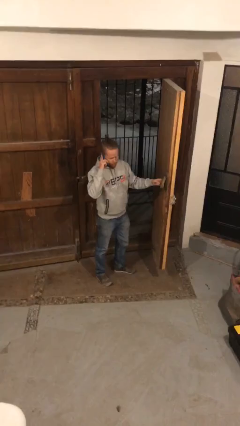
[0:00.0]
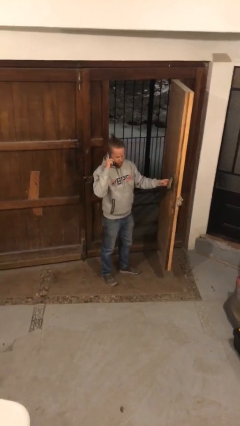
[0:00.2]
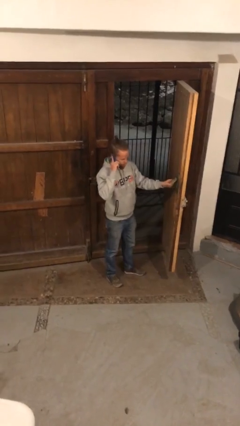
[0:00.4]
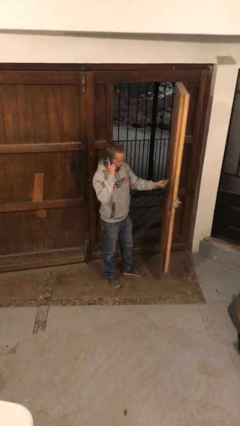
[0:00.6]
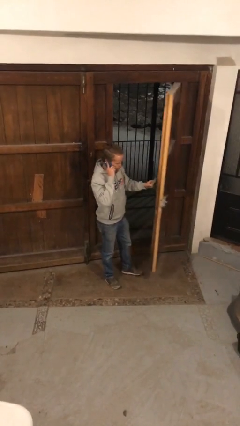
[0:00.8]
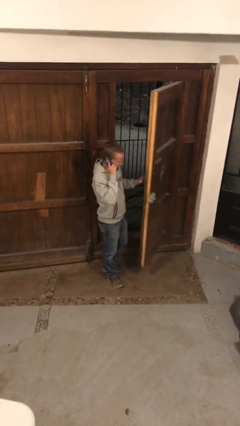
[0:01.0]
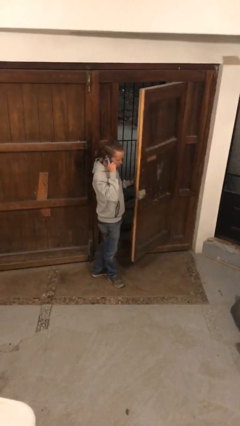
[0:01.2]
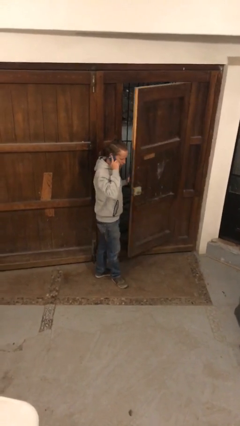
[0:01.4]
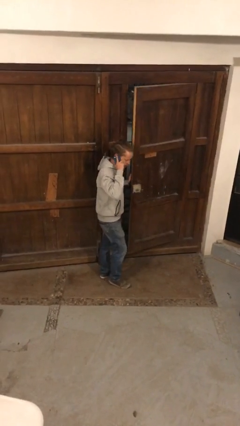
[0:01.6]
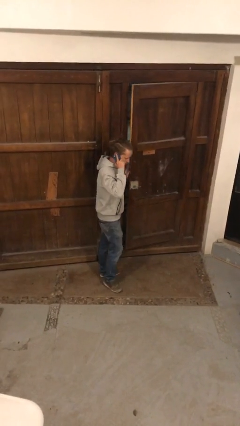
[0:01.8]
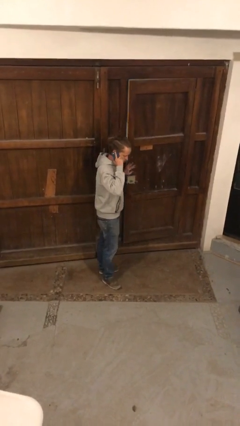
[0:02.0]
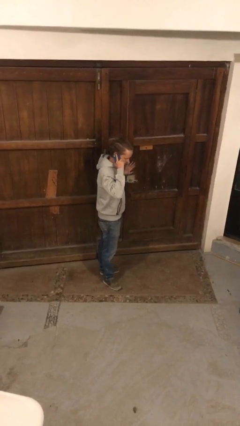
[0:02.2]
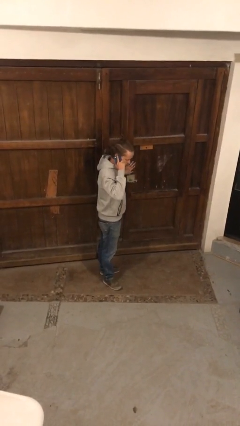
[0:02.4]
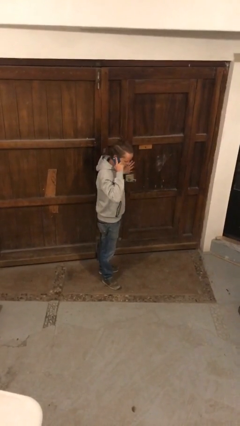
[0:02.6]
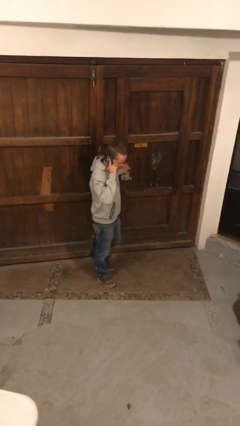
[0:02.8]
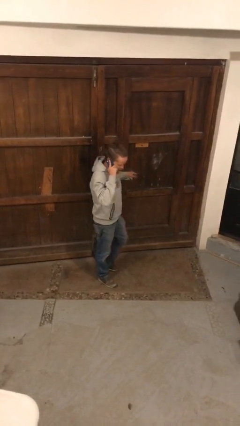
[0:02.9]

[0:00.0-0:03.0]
person closes facility door

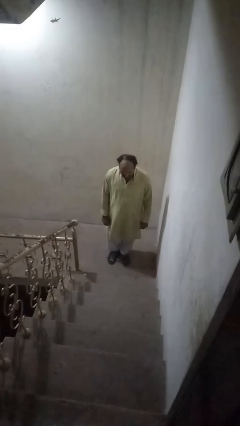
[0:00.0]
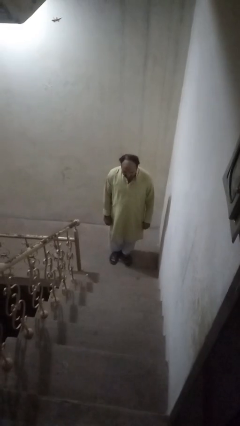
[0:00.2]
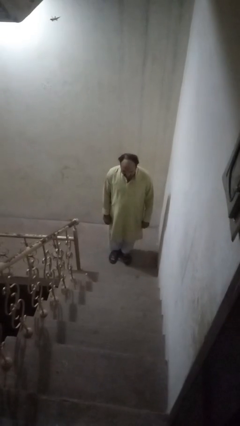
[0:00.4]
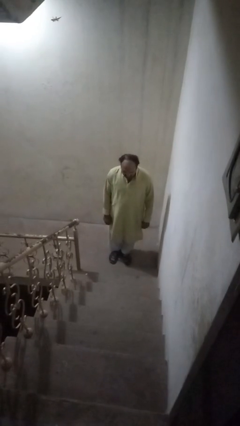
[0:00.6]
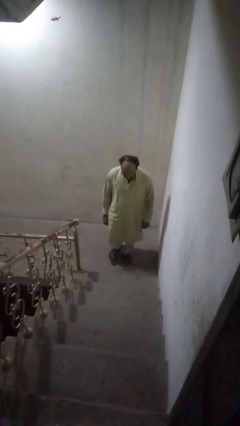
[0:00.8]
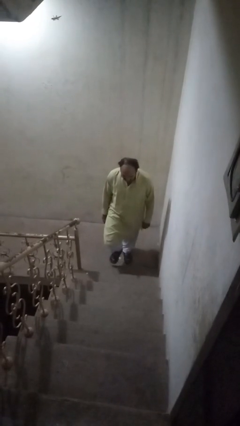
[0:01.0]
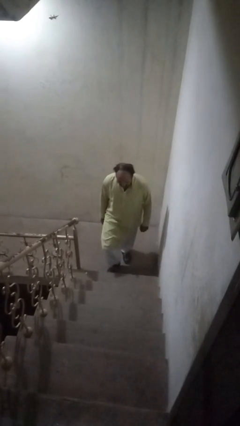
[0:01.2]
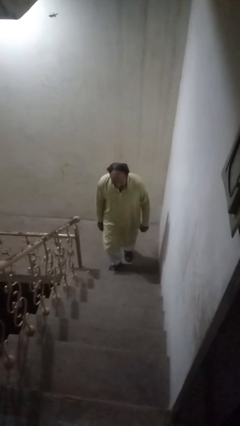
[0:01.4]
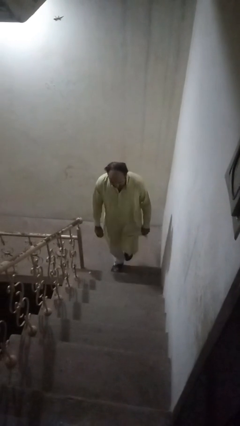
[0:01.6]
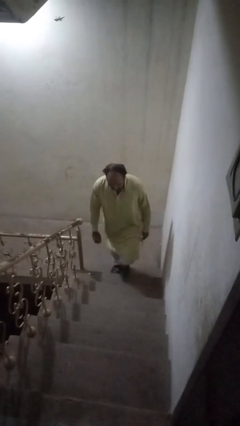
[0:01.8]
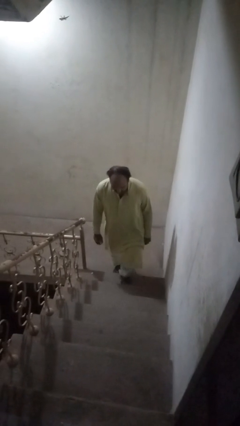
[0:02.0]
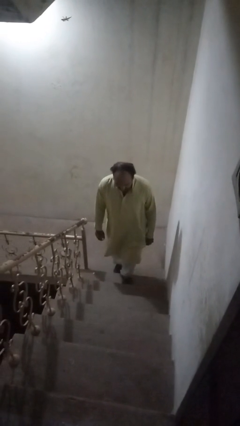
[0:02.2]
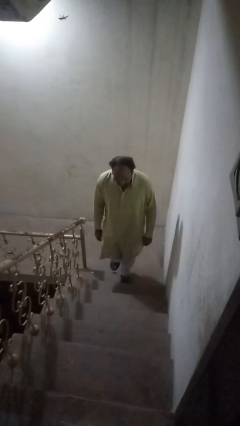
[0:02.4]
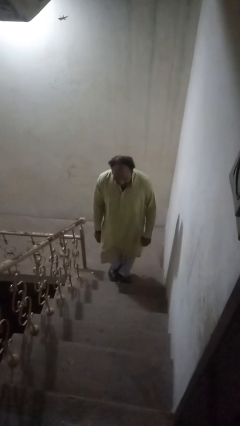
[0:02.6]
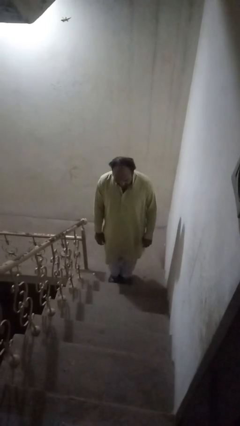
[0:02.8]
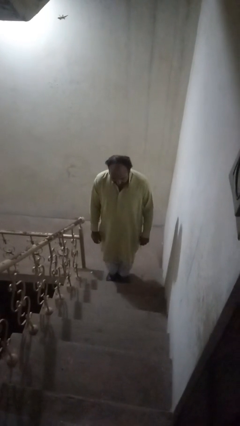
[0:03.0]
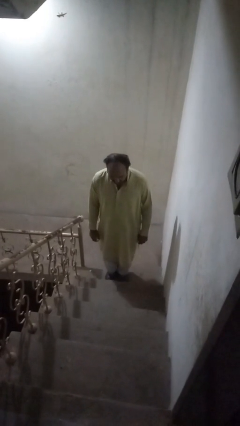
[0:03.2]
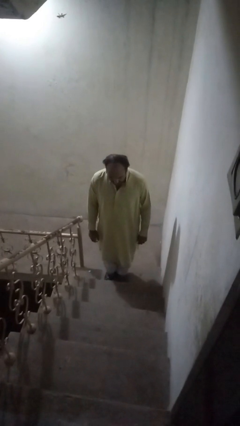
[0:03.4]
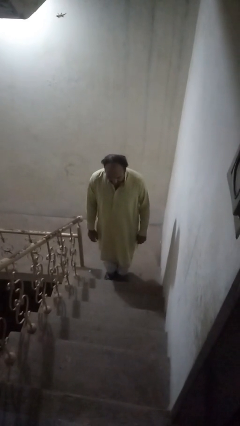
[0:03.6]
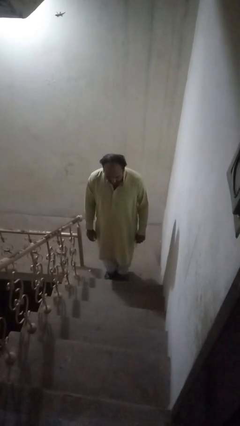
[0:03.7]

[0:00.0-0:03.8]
person climbs up ladder

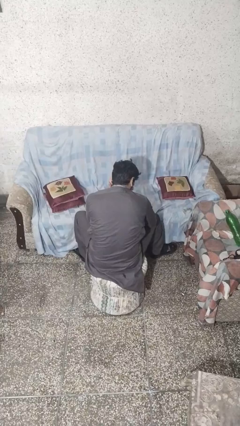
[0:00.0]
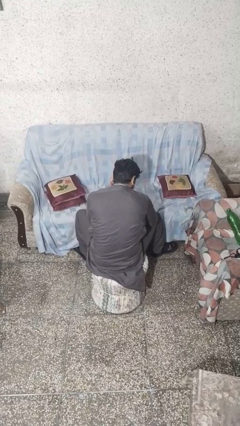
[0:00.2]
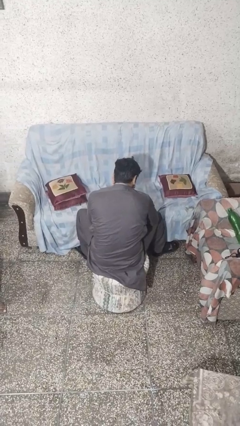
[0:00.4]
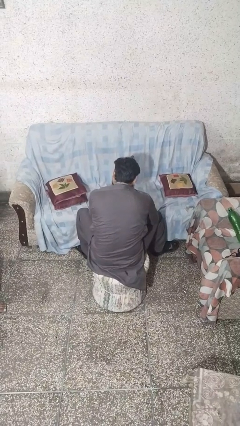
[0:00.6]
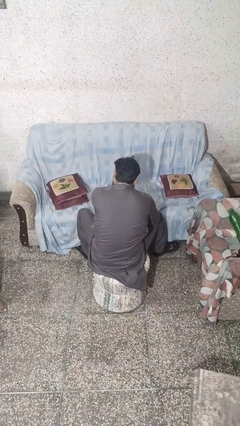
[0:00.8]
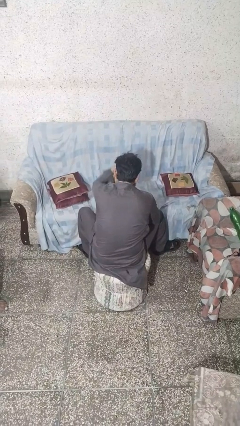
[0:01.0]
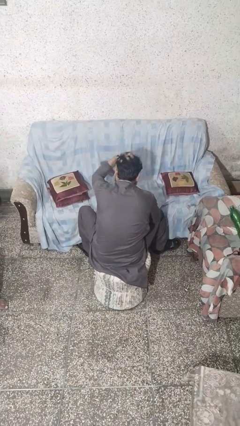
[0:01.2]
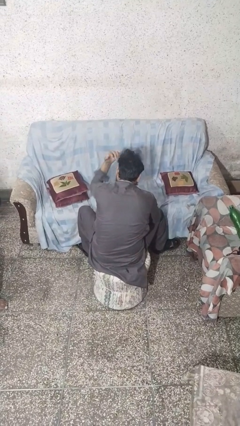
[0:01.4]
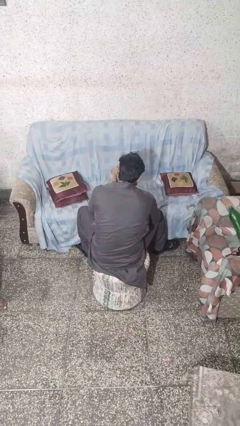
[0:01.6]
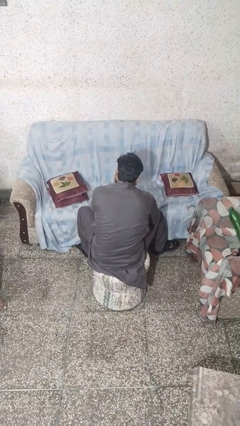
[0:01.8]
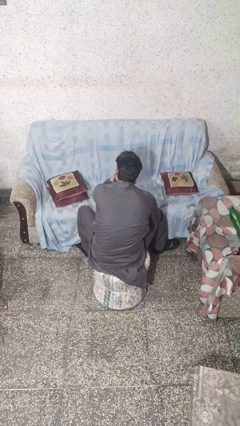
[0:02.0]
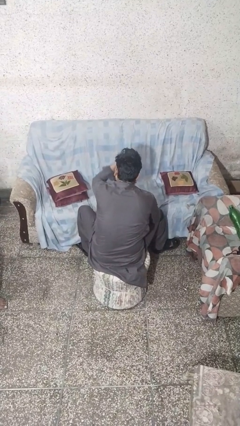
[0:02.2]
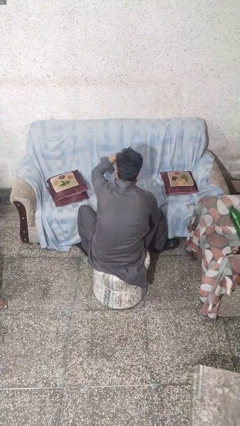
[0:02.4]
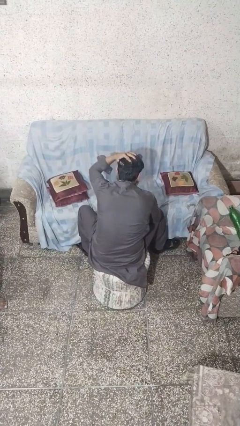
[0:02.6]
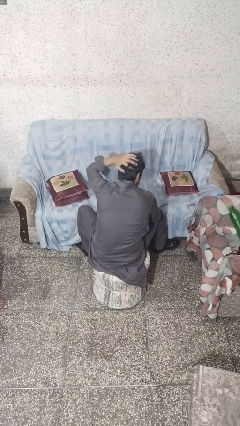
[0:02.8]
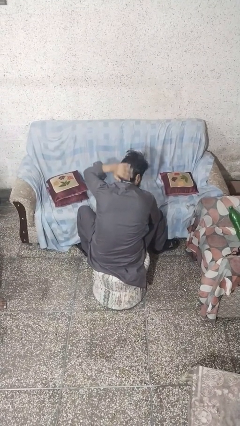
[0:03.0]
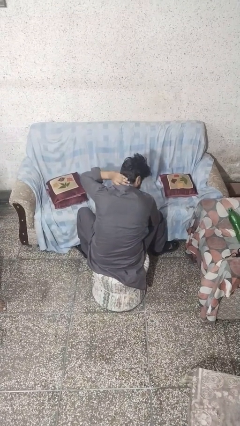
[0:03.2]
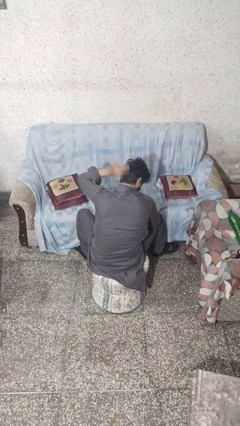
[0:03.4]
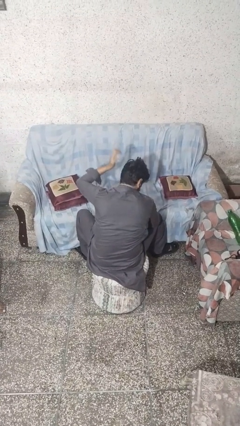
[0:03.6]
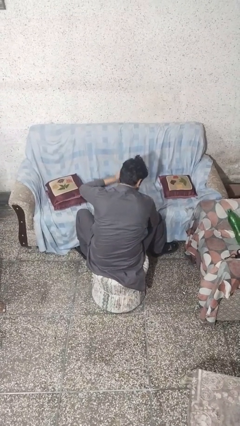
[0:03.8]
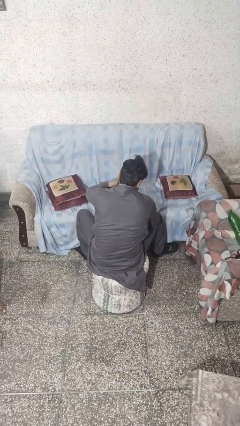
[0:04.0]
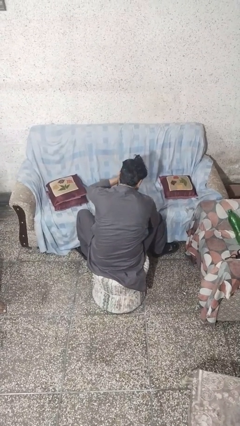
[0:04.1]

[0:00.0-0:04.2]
person strokes hair

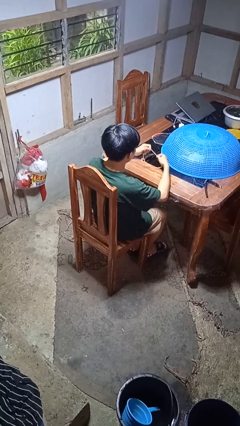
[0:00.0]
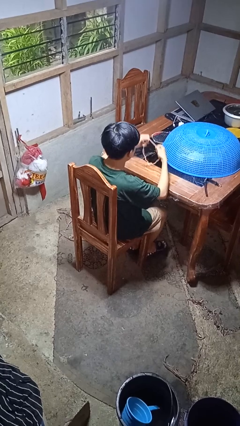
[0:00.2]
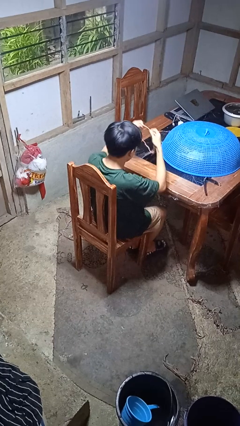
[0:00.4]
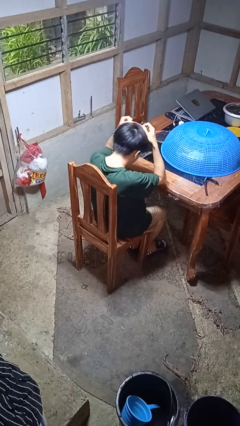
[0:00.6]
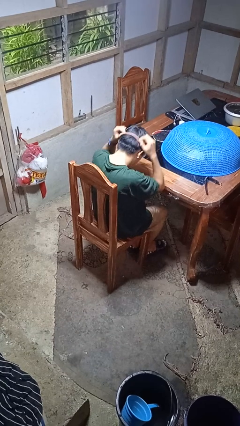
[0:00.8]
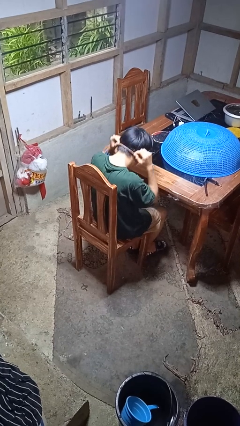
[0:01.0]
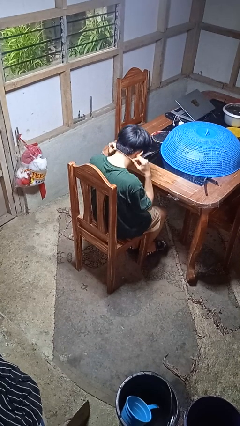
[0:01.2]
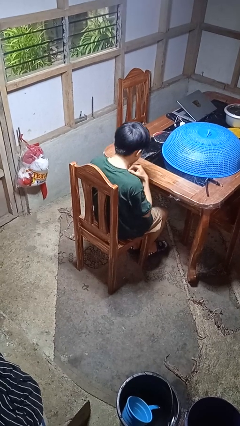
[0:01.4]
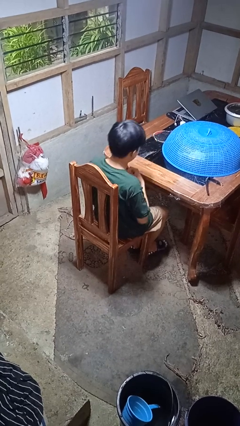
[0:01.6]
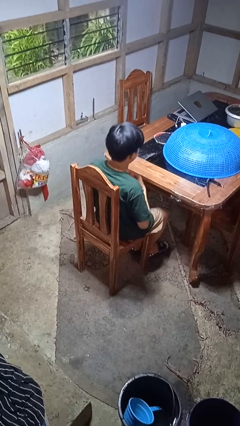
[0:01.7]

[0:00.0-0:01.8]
person puts on necklace

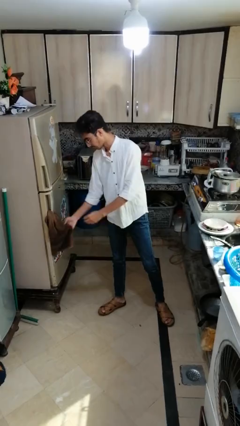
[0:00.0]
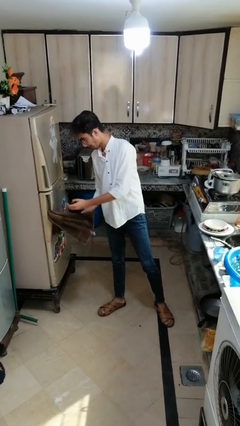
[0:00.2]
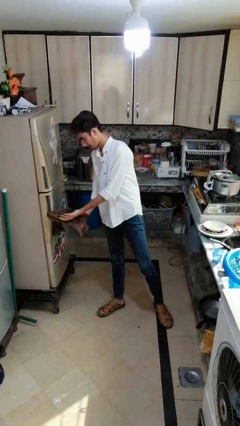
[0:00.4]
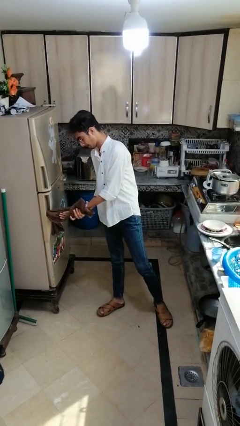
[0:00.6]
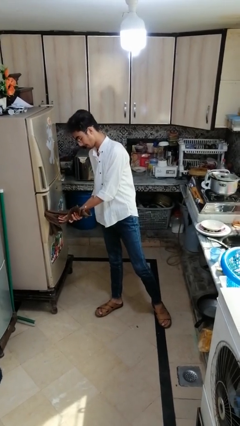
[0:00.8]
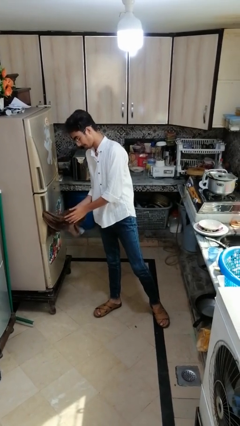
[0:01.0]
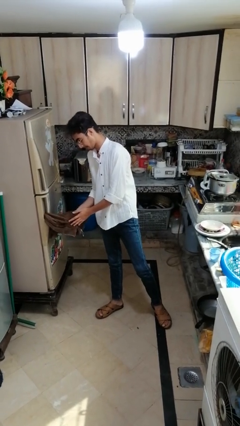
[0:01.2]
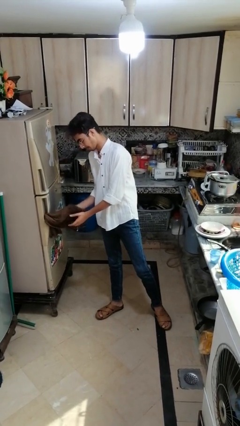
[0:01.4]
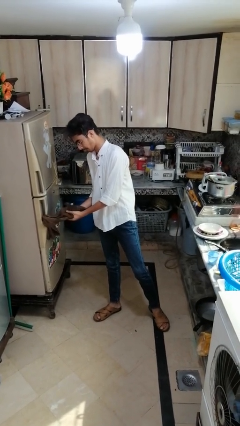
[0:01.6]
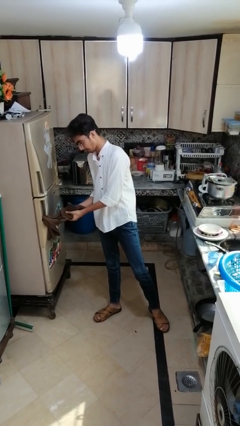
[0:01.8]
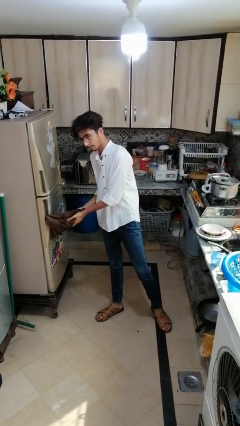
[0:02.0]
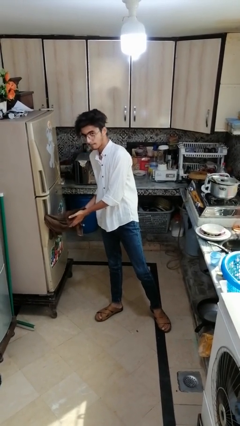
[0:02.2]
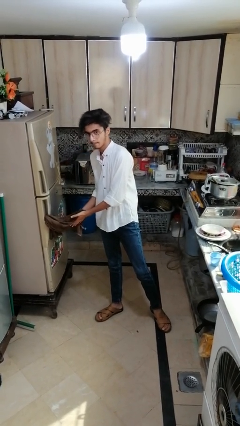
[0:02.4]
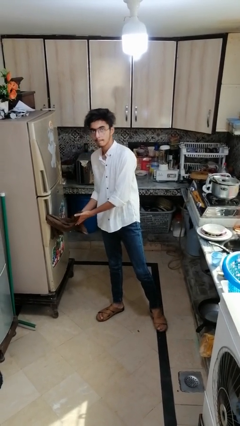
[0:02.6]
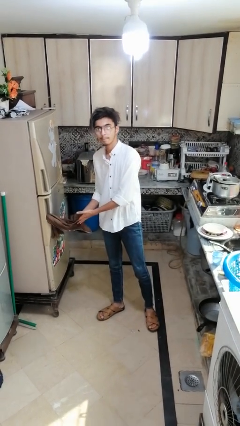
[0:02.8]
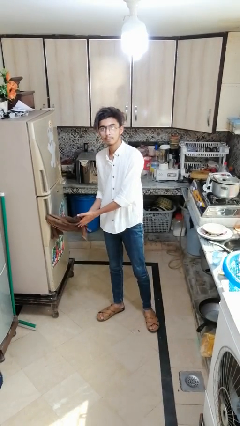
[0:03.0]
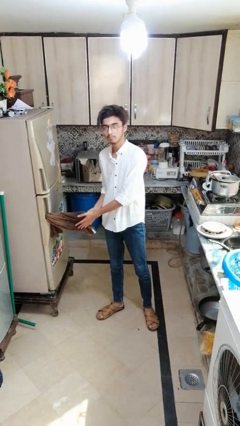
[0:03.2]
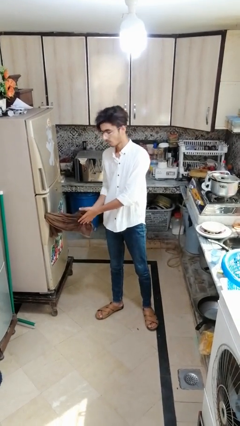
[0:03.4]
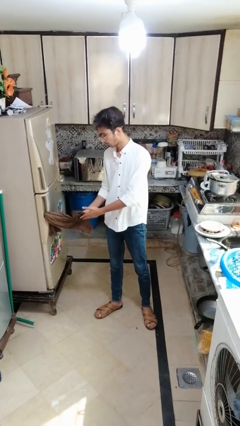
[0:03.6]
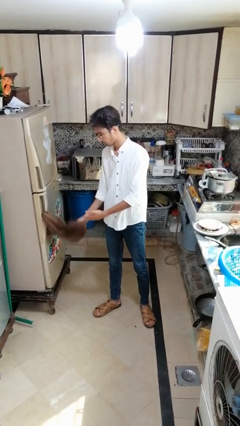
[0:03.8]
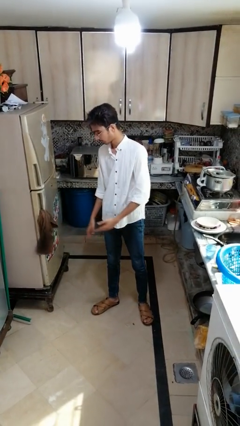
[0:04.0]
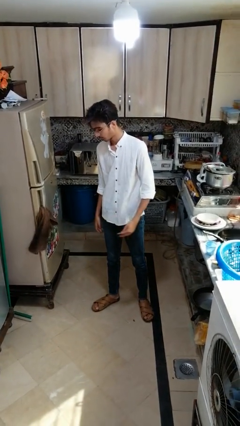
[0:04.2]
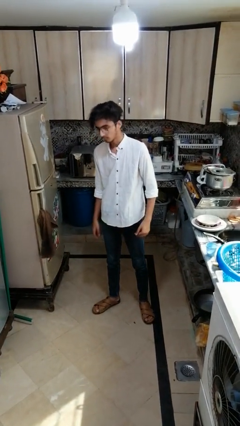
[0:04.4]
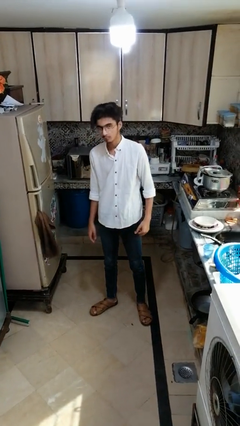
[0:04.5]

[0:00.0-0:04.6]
person dries hands with towel
